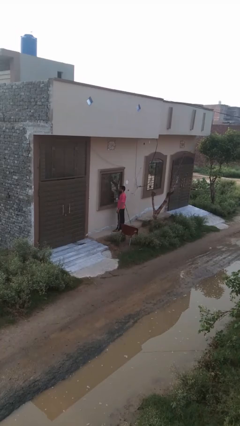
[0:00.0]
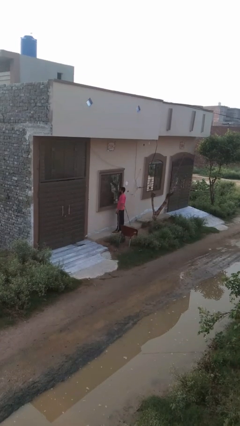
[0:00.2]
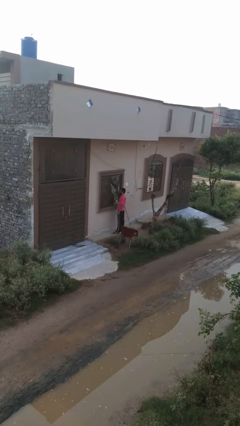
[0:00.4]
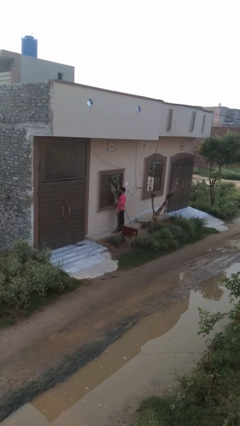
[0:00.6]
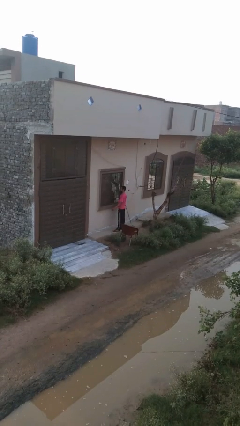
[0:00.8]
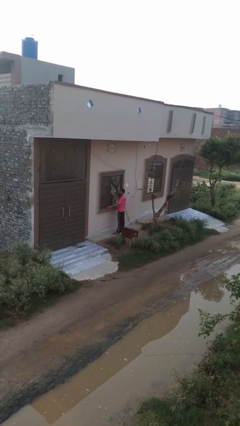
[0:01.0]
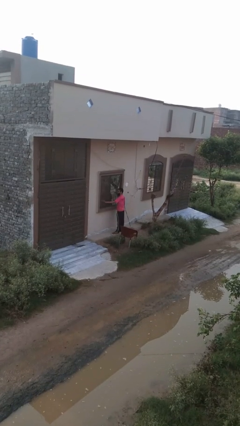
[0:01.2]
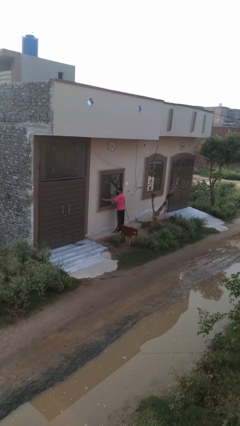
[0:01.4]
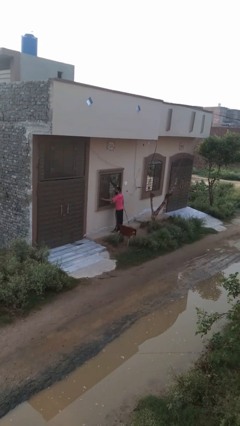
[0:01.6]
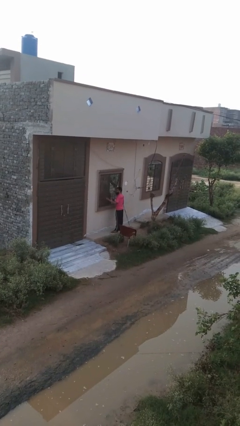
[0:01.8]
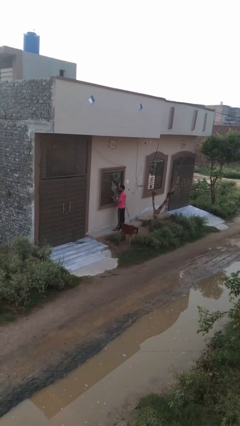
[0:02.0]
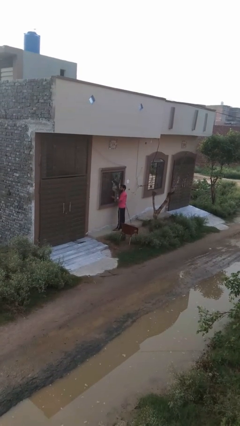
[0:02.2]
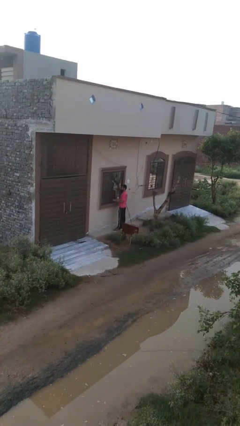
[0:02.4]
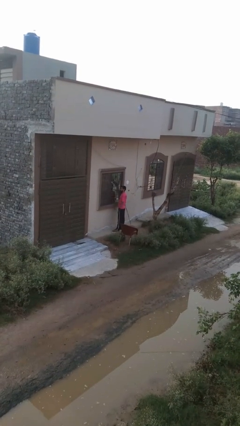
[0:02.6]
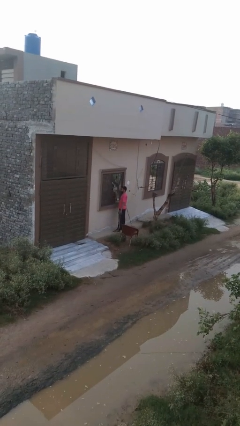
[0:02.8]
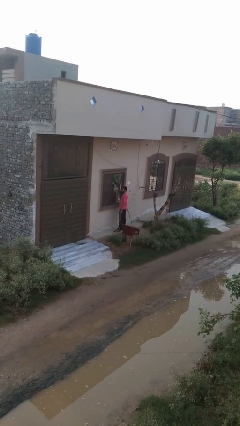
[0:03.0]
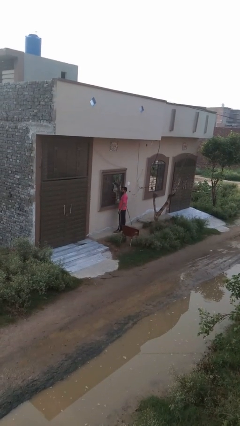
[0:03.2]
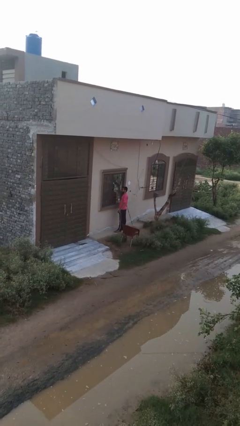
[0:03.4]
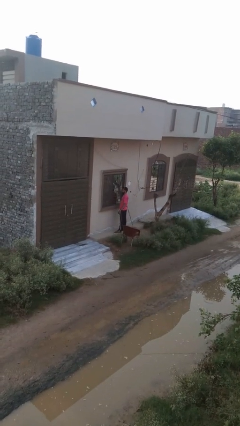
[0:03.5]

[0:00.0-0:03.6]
person closes home window

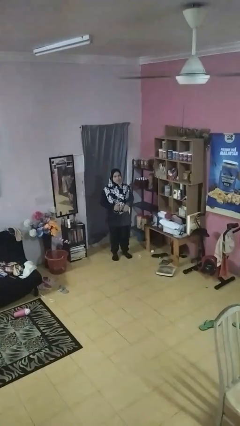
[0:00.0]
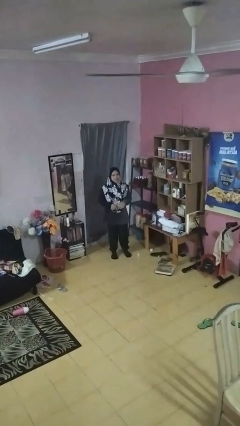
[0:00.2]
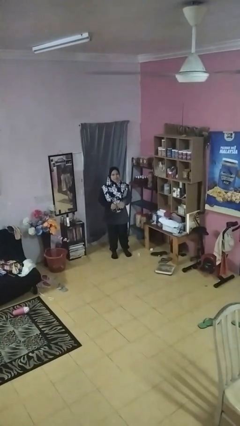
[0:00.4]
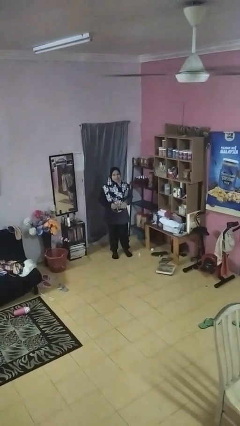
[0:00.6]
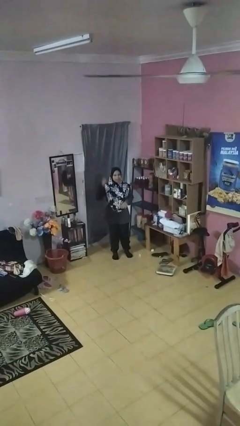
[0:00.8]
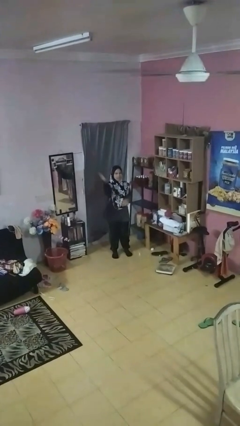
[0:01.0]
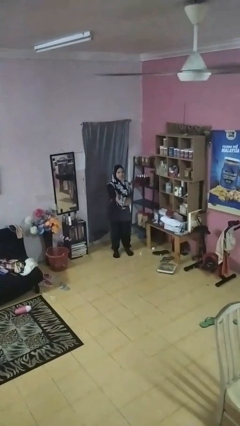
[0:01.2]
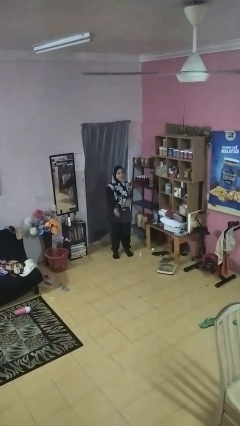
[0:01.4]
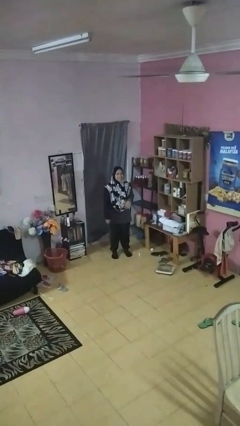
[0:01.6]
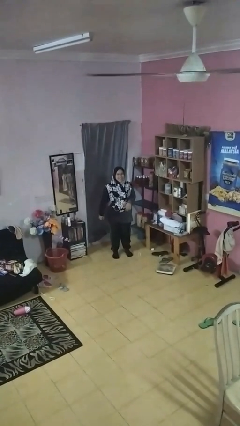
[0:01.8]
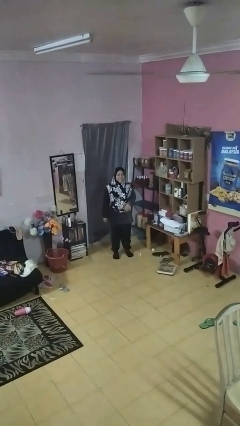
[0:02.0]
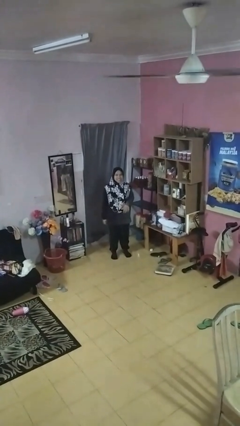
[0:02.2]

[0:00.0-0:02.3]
person karate chop

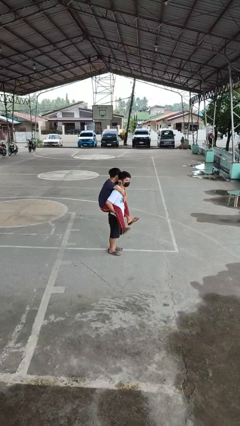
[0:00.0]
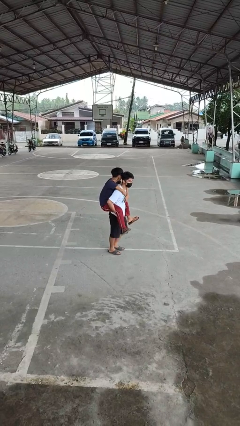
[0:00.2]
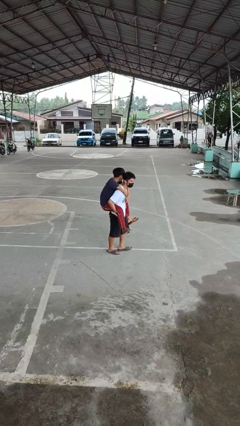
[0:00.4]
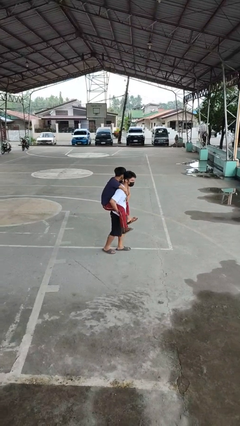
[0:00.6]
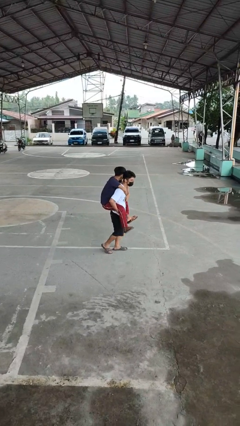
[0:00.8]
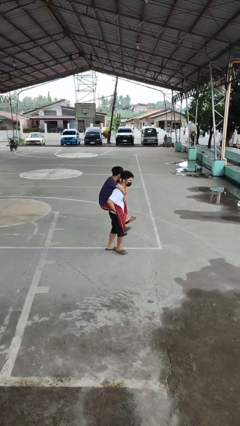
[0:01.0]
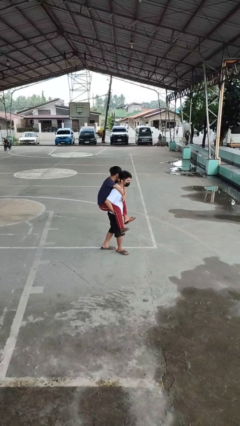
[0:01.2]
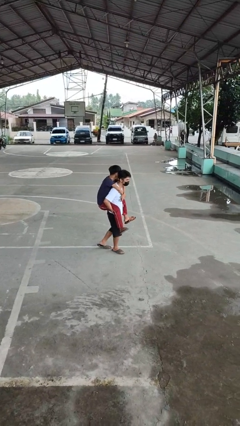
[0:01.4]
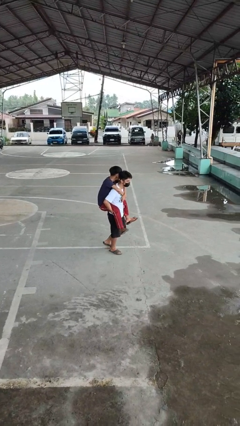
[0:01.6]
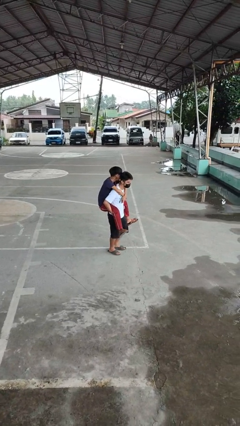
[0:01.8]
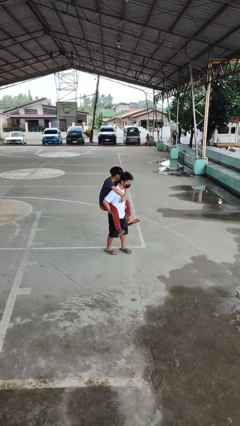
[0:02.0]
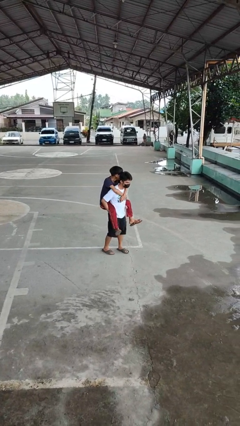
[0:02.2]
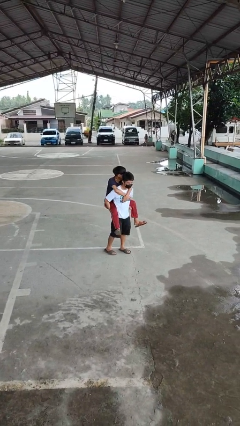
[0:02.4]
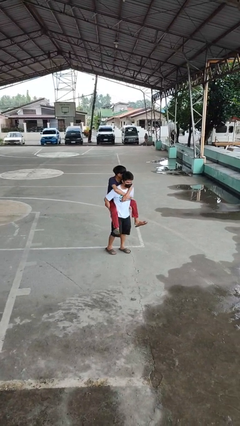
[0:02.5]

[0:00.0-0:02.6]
person carries person on back

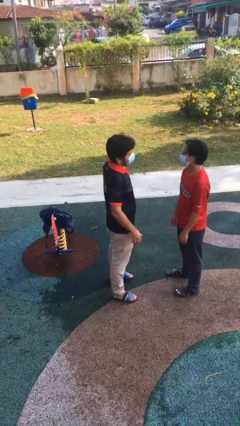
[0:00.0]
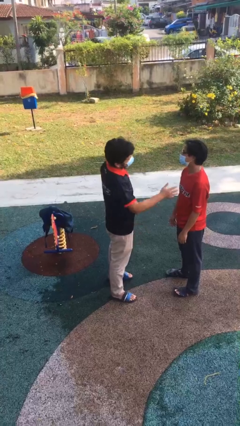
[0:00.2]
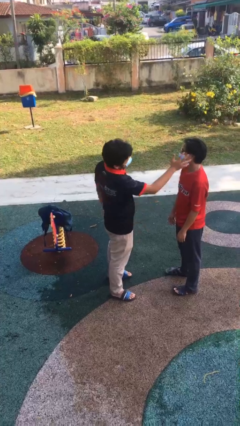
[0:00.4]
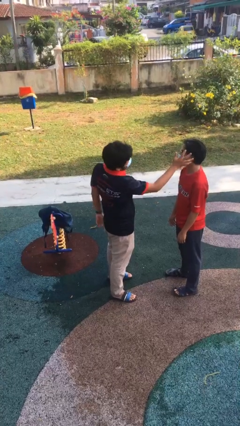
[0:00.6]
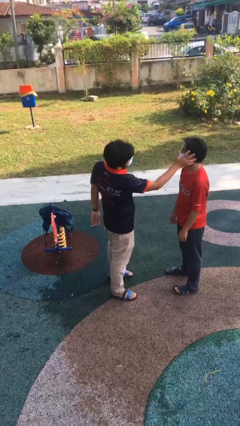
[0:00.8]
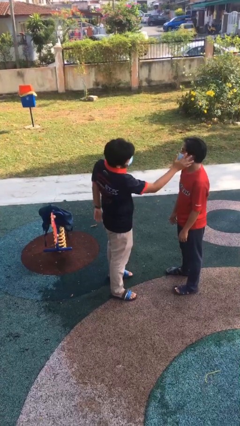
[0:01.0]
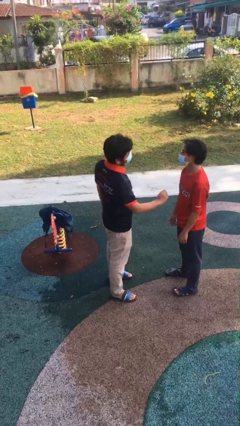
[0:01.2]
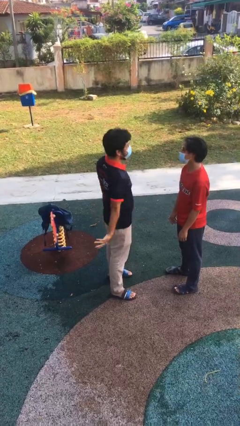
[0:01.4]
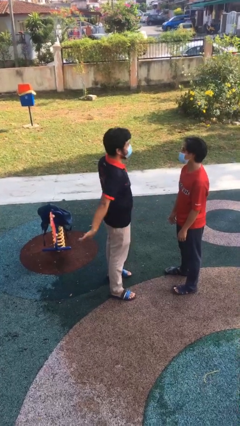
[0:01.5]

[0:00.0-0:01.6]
person touches face of person

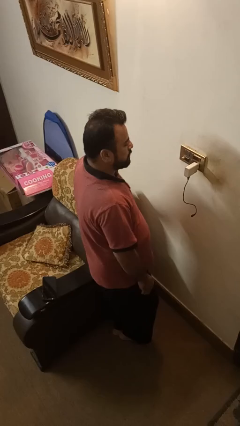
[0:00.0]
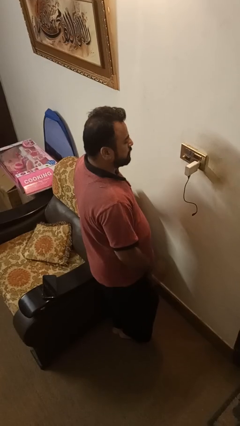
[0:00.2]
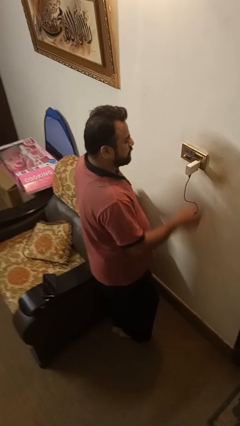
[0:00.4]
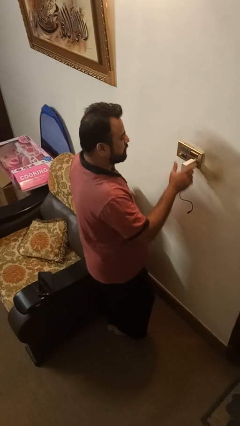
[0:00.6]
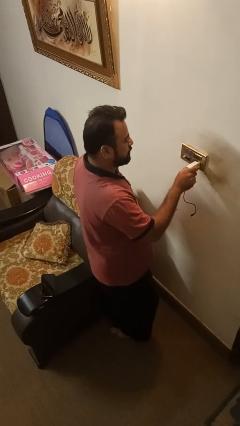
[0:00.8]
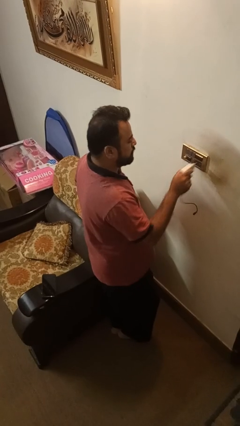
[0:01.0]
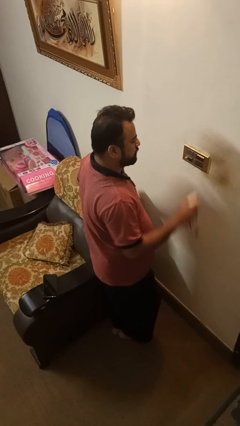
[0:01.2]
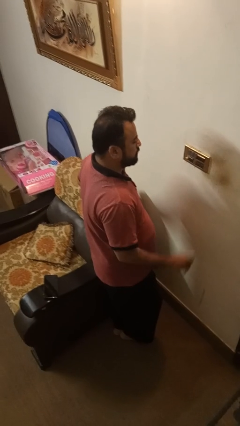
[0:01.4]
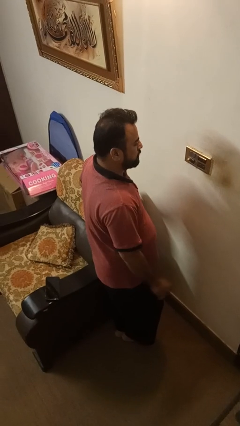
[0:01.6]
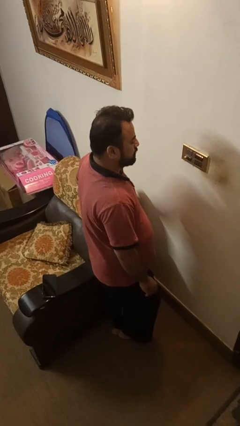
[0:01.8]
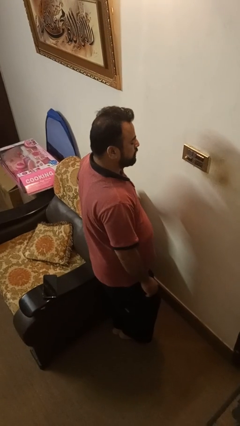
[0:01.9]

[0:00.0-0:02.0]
person unplugs from electrical socket

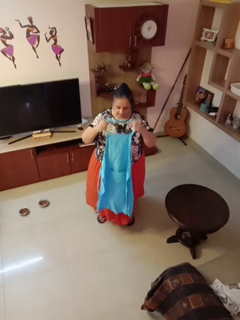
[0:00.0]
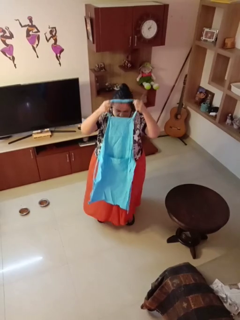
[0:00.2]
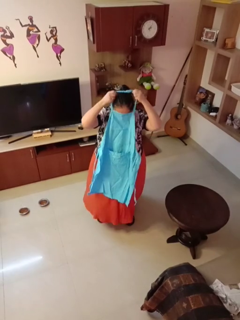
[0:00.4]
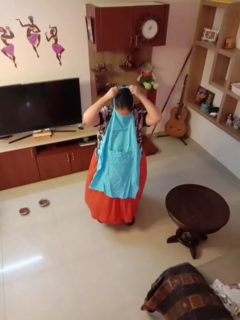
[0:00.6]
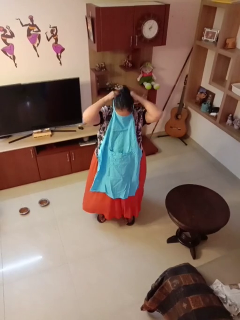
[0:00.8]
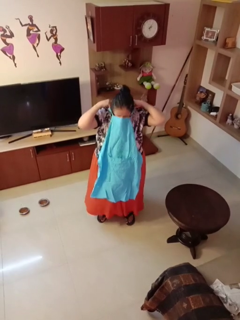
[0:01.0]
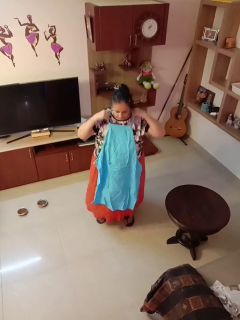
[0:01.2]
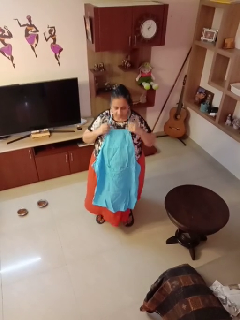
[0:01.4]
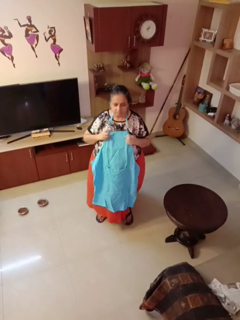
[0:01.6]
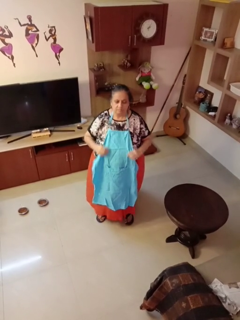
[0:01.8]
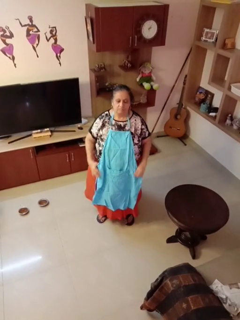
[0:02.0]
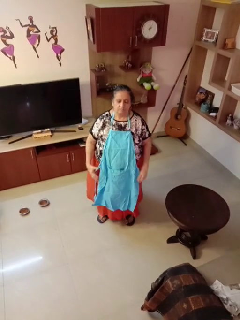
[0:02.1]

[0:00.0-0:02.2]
person puts on apron

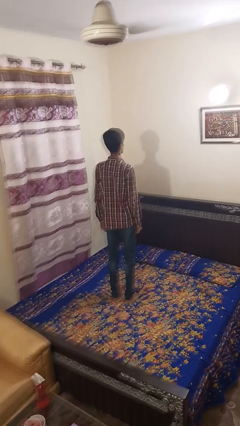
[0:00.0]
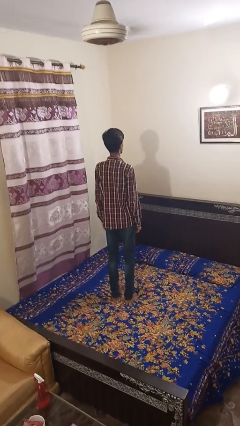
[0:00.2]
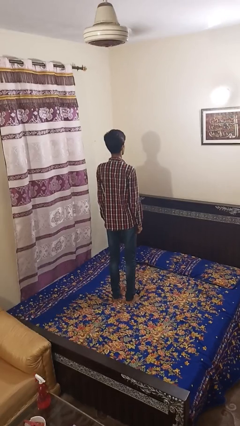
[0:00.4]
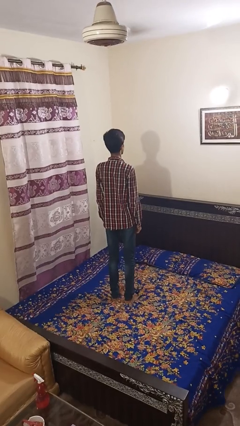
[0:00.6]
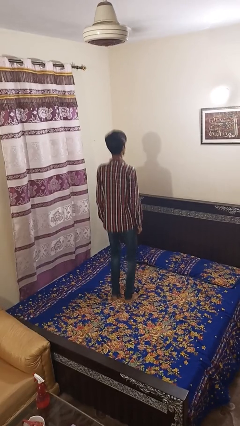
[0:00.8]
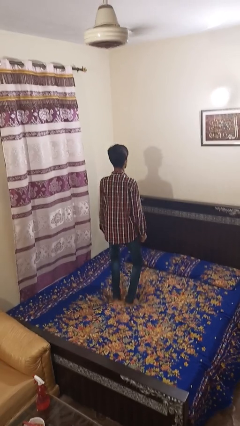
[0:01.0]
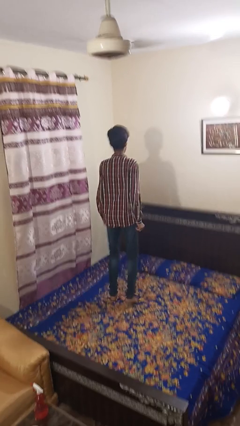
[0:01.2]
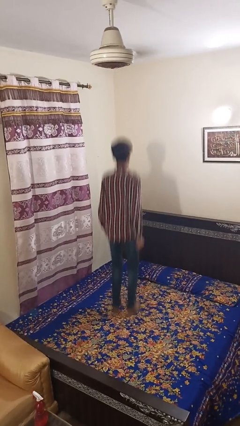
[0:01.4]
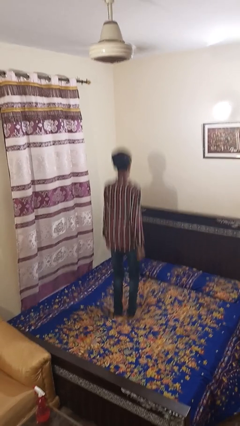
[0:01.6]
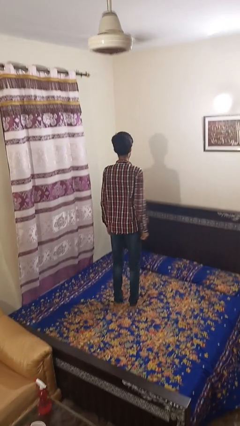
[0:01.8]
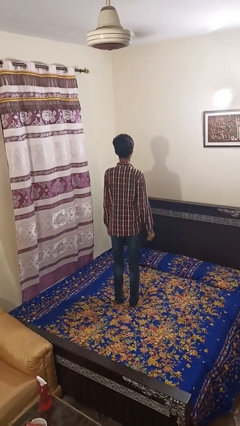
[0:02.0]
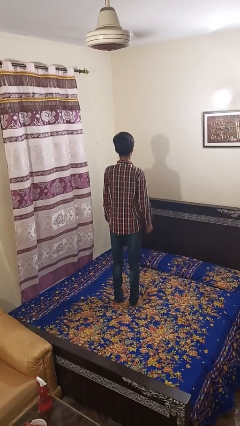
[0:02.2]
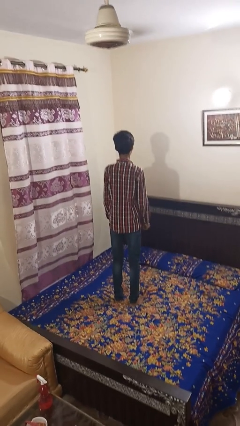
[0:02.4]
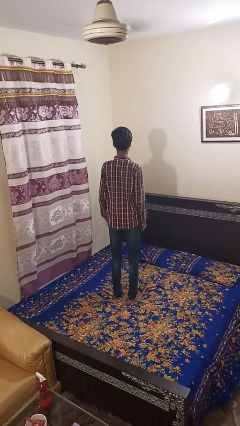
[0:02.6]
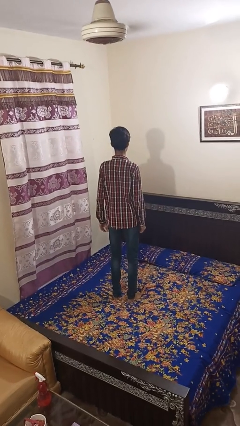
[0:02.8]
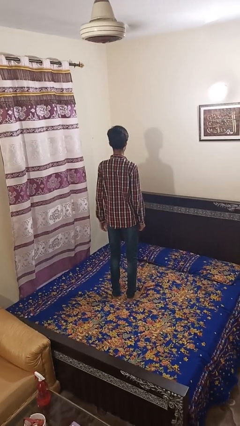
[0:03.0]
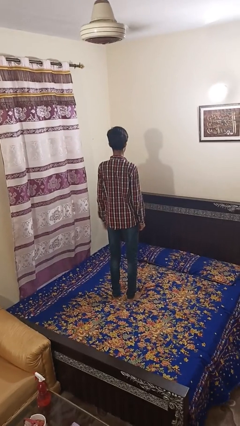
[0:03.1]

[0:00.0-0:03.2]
person jumps on bed

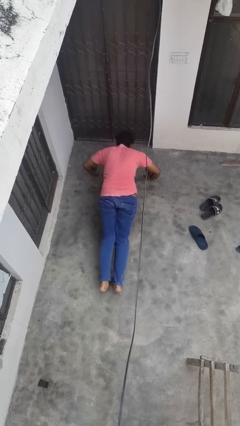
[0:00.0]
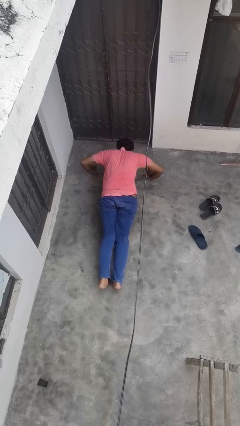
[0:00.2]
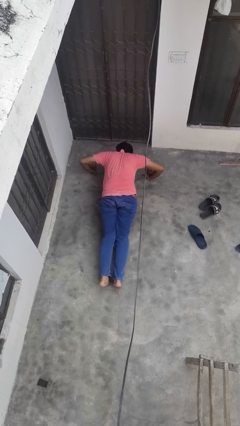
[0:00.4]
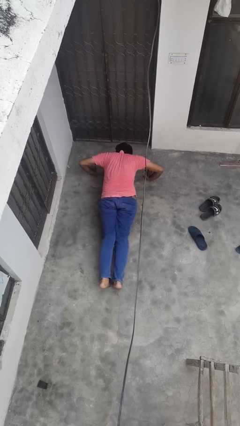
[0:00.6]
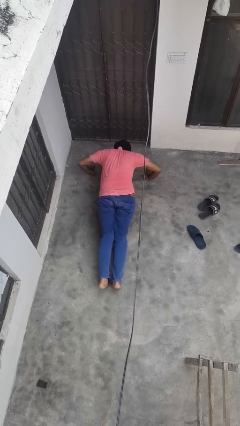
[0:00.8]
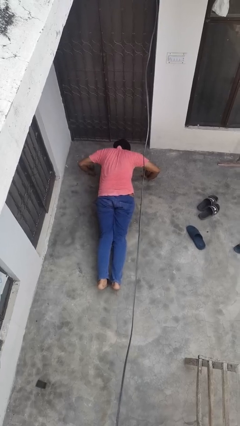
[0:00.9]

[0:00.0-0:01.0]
person exercises with pushup
